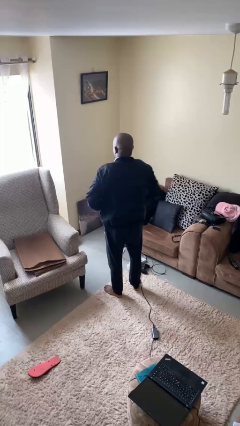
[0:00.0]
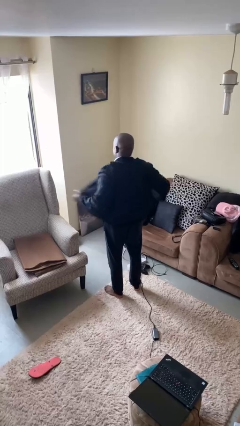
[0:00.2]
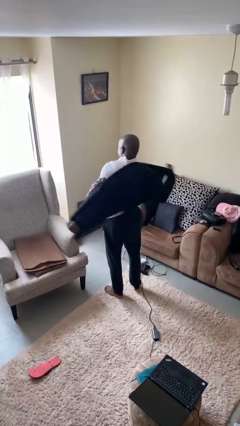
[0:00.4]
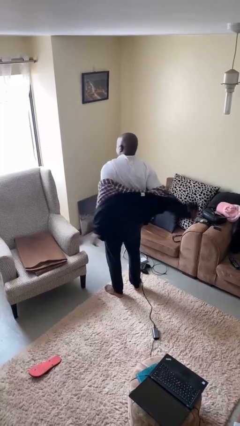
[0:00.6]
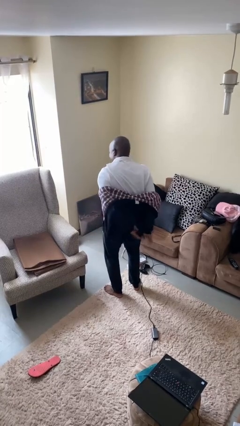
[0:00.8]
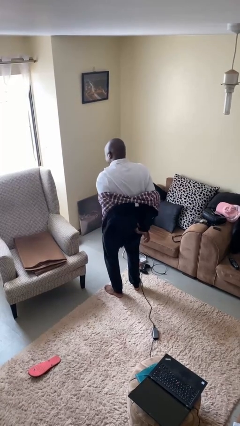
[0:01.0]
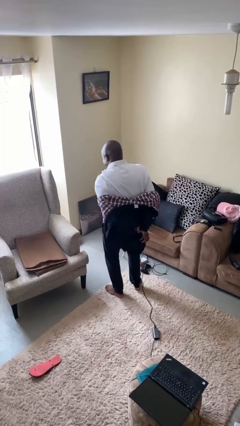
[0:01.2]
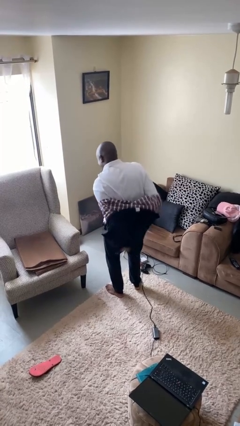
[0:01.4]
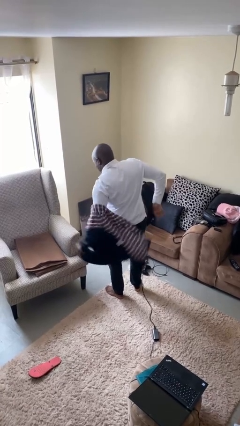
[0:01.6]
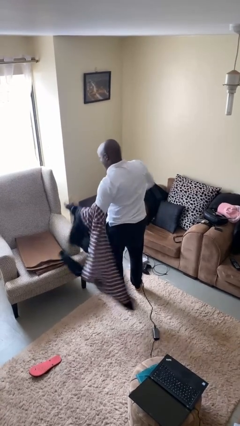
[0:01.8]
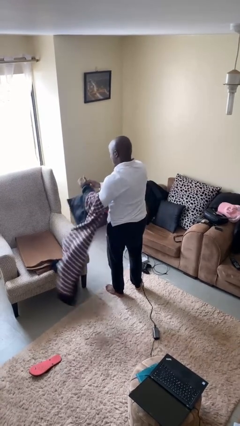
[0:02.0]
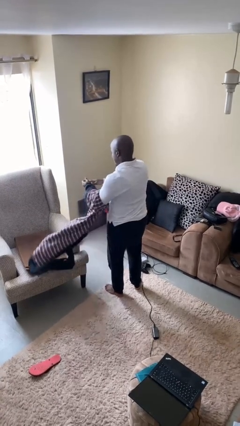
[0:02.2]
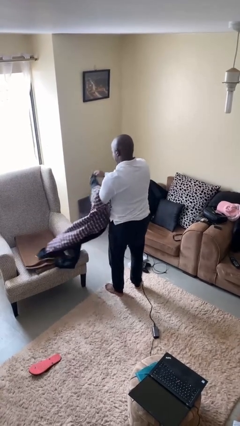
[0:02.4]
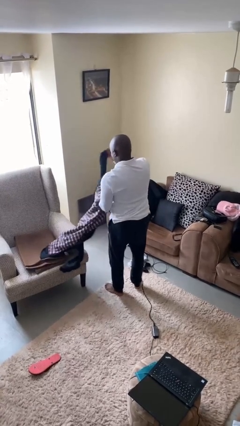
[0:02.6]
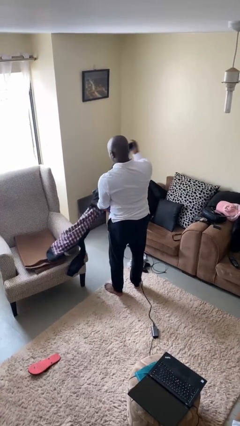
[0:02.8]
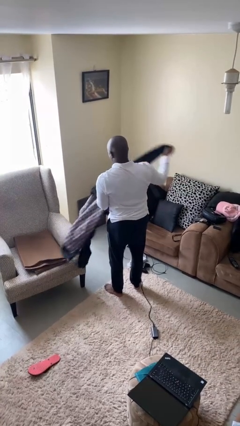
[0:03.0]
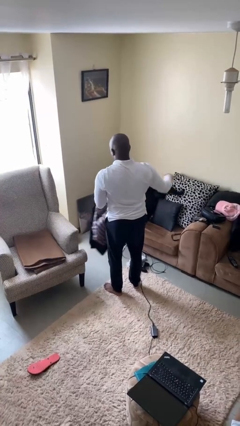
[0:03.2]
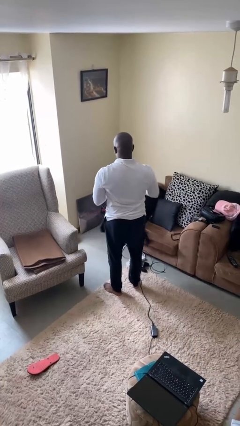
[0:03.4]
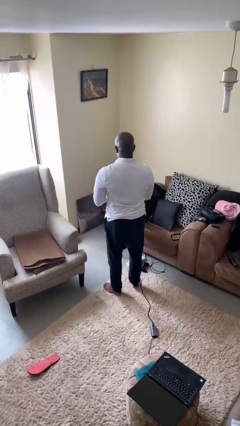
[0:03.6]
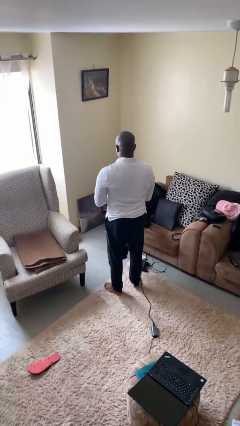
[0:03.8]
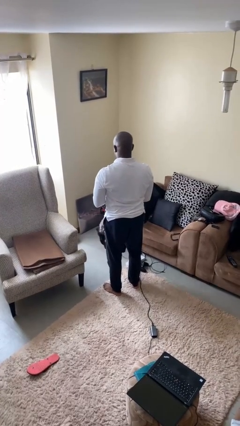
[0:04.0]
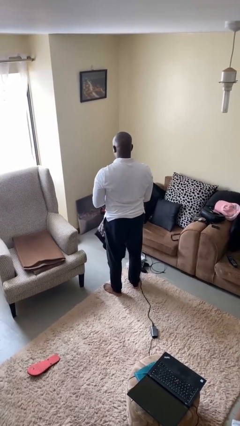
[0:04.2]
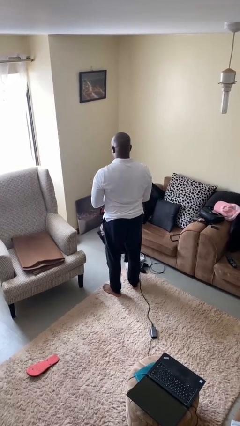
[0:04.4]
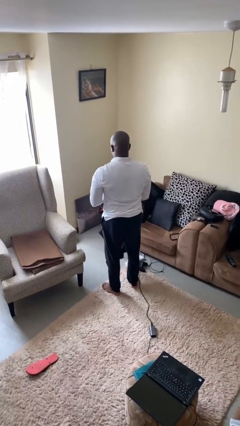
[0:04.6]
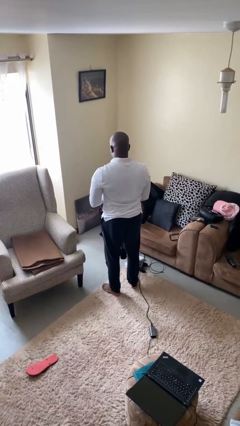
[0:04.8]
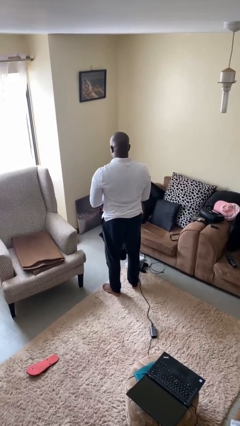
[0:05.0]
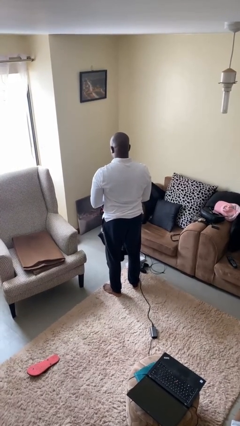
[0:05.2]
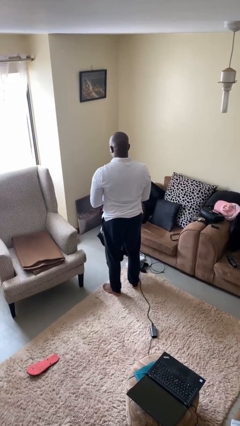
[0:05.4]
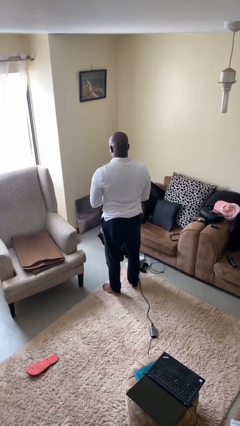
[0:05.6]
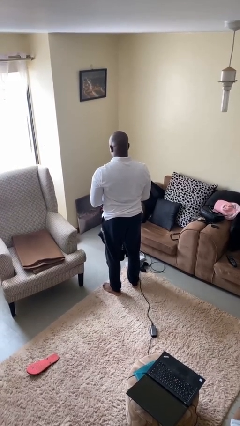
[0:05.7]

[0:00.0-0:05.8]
person takes off jacket

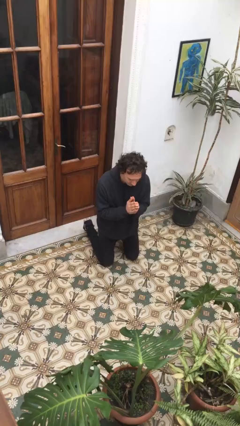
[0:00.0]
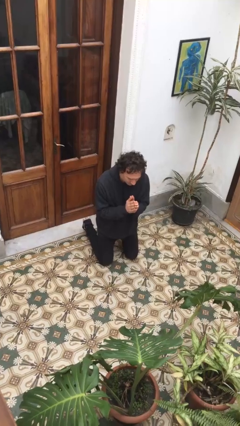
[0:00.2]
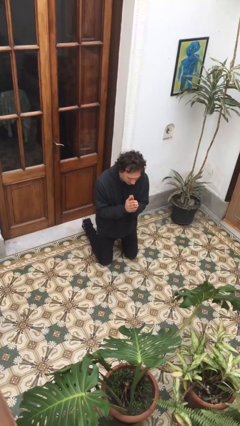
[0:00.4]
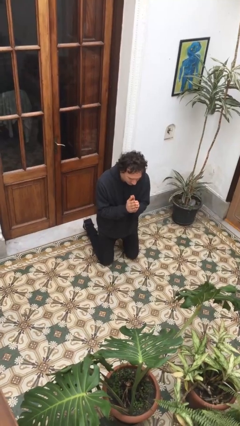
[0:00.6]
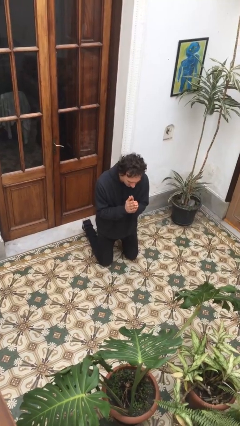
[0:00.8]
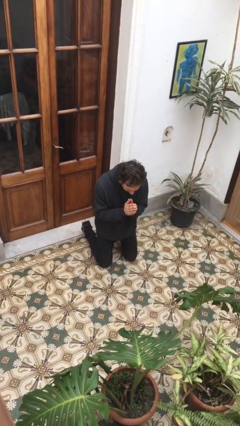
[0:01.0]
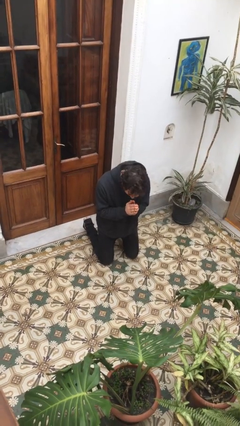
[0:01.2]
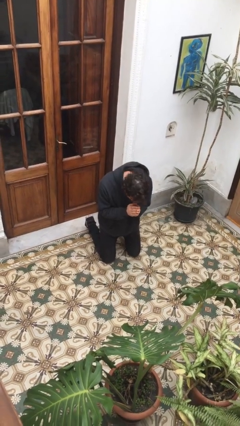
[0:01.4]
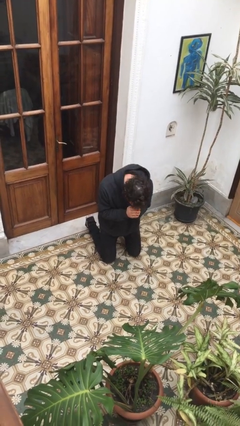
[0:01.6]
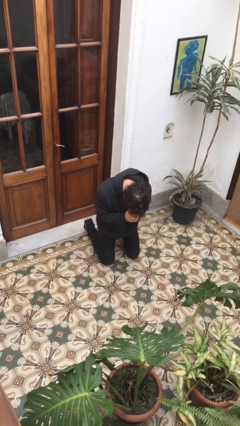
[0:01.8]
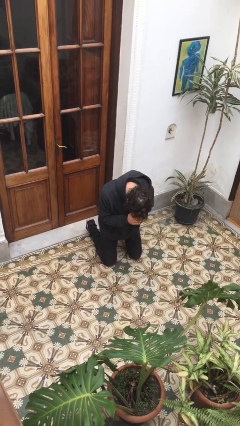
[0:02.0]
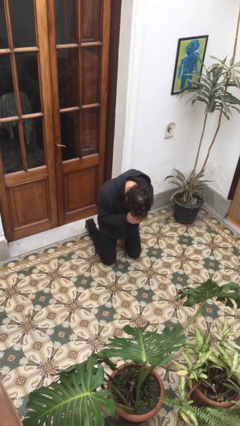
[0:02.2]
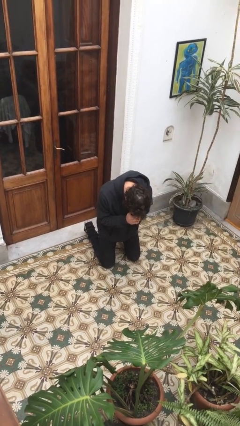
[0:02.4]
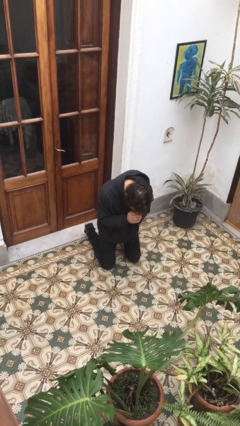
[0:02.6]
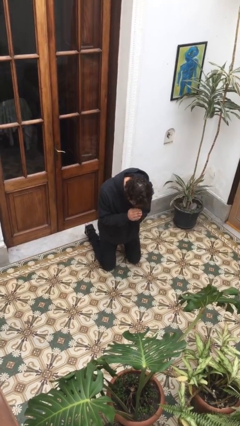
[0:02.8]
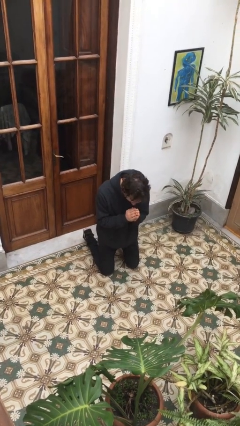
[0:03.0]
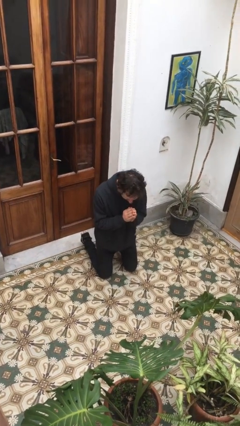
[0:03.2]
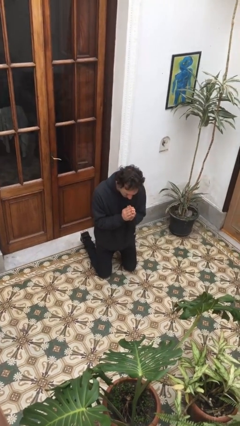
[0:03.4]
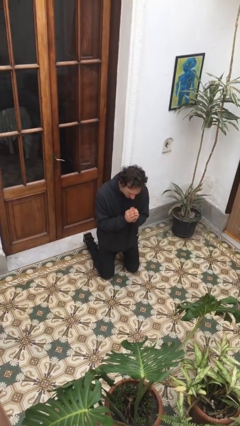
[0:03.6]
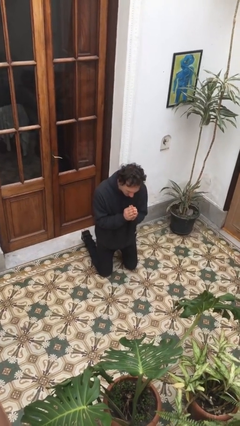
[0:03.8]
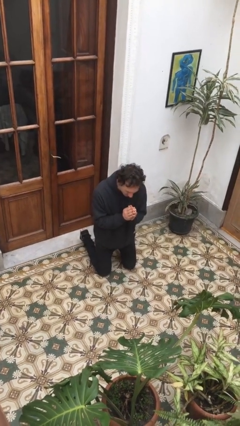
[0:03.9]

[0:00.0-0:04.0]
person prays

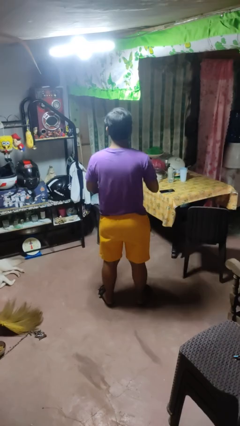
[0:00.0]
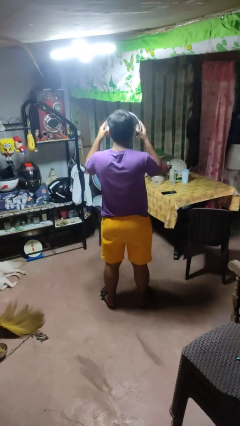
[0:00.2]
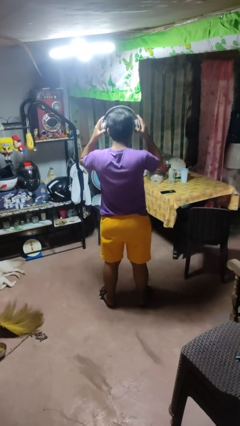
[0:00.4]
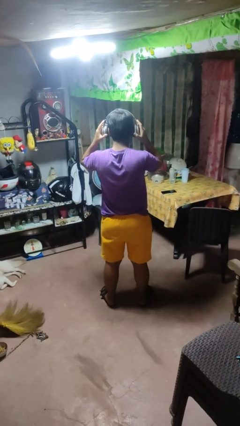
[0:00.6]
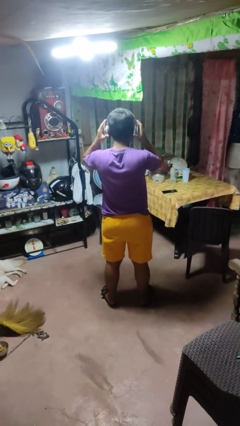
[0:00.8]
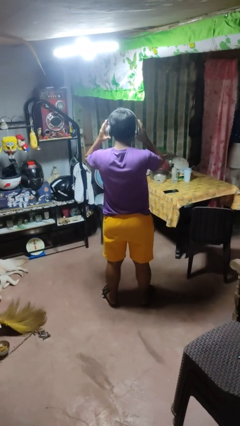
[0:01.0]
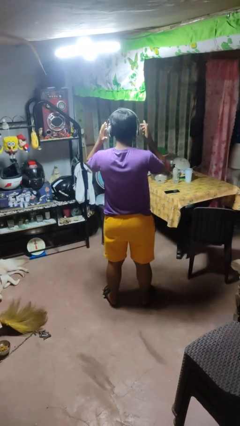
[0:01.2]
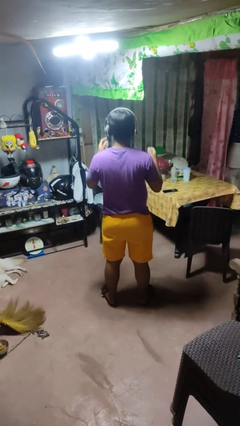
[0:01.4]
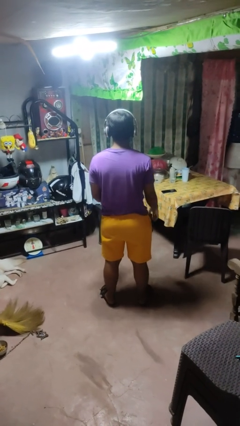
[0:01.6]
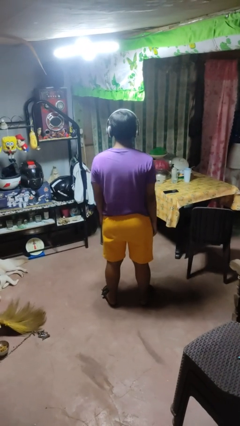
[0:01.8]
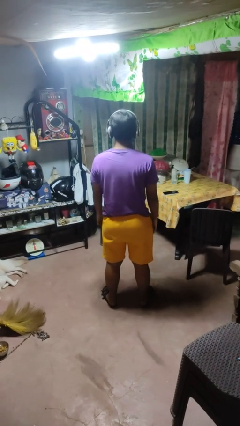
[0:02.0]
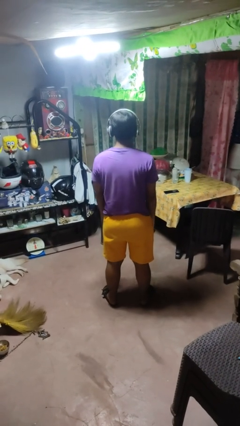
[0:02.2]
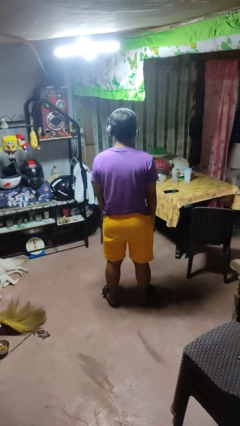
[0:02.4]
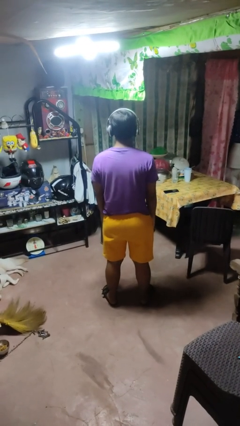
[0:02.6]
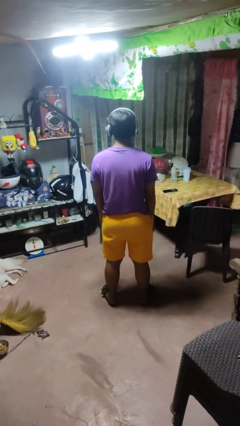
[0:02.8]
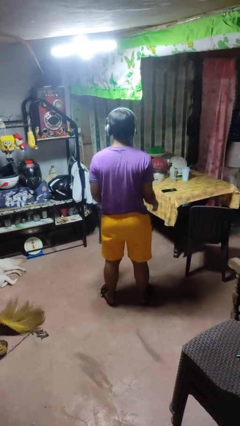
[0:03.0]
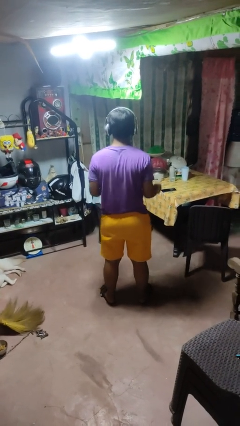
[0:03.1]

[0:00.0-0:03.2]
person puts on headphones

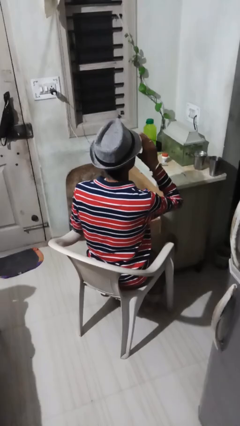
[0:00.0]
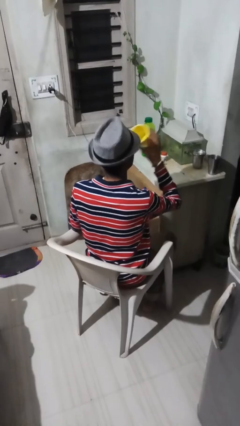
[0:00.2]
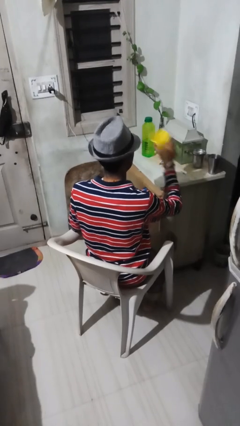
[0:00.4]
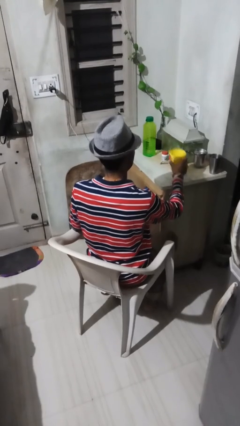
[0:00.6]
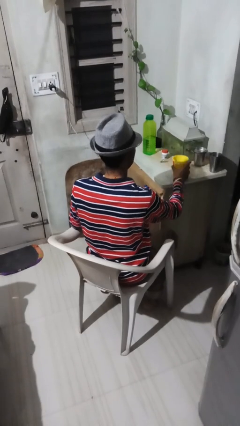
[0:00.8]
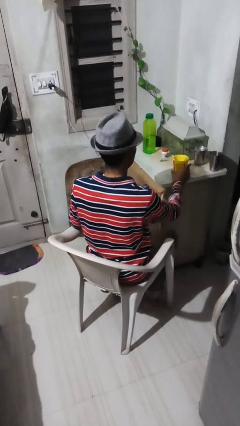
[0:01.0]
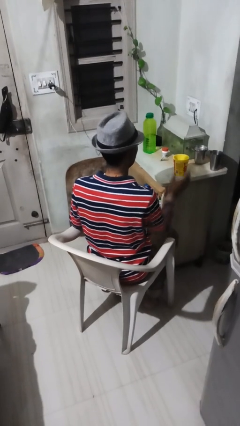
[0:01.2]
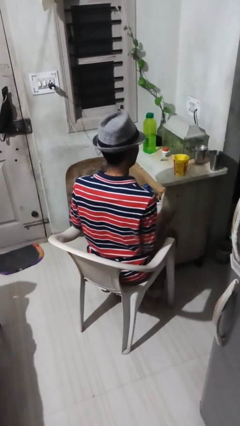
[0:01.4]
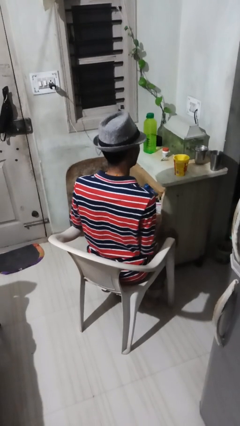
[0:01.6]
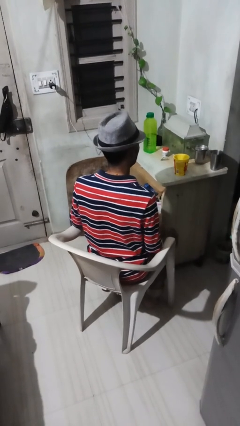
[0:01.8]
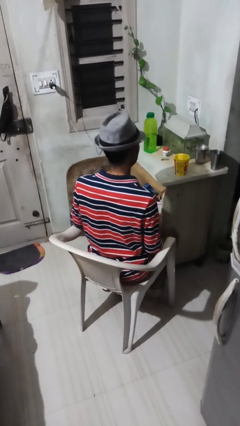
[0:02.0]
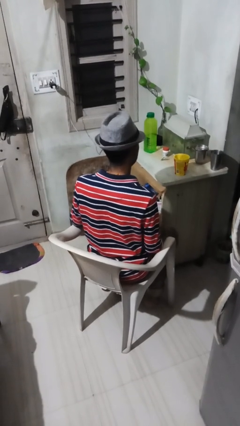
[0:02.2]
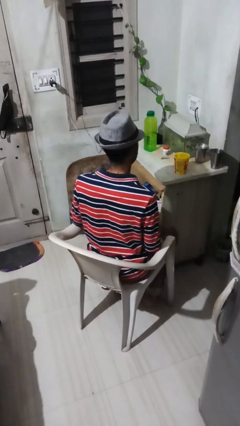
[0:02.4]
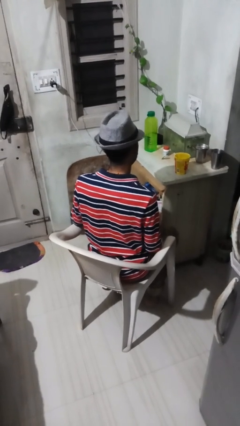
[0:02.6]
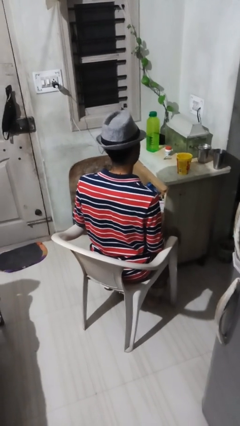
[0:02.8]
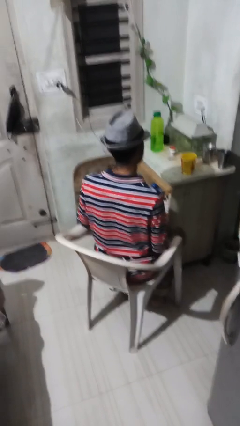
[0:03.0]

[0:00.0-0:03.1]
person puts down object on table

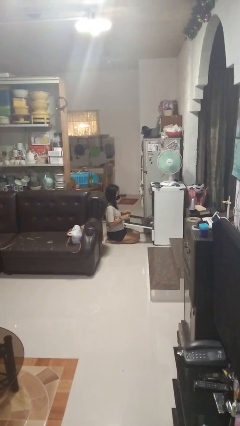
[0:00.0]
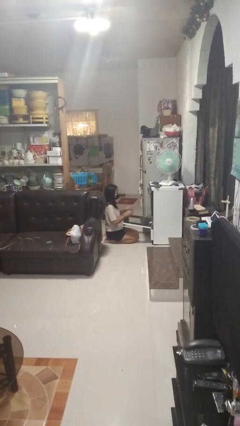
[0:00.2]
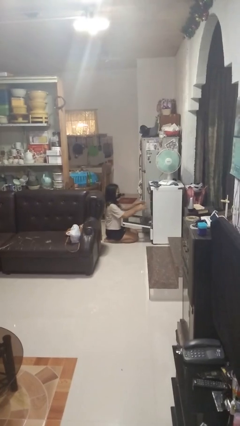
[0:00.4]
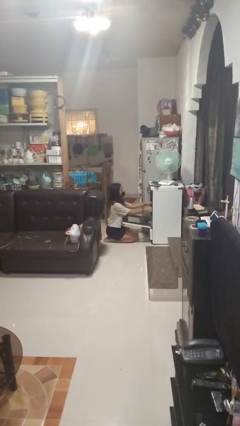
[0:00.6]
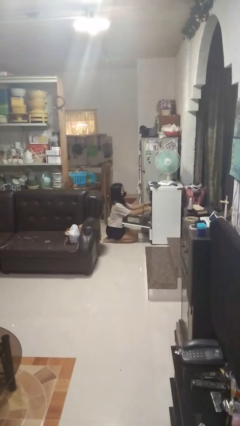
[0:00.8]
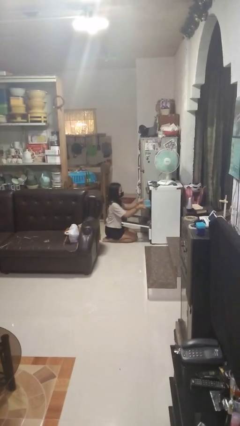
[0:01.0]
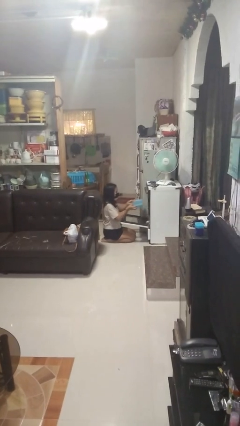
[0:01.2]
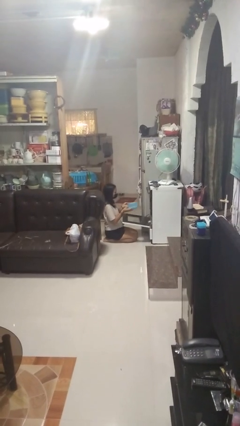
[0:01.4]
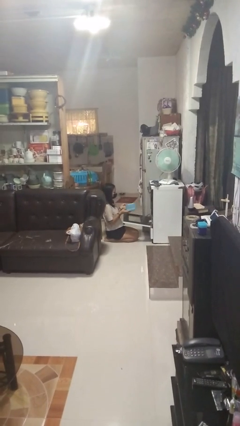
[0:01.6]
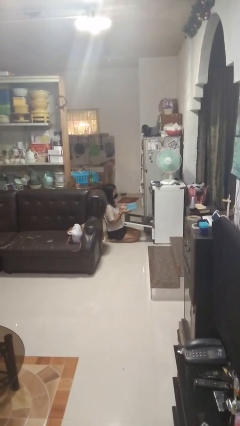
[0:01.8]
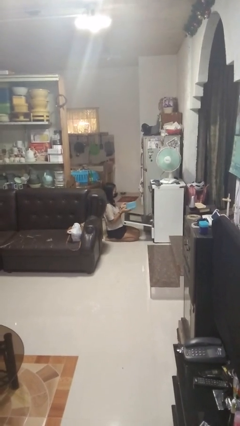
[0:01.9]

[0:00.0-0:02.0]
person takes object from oven
